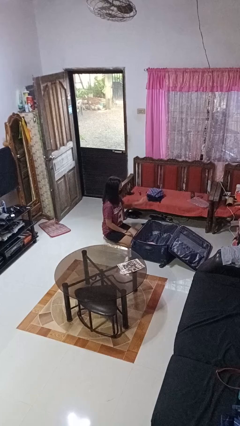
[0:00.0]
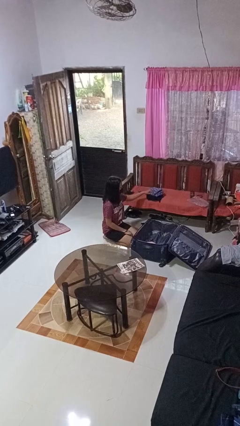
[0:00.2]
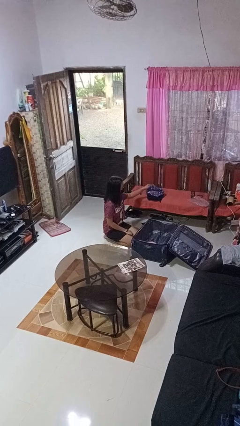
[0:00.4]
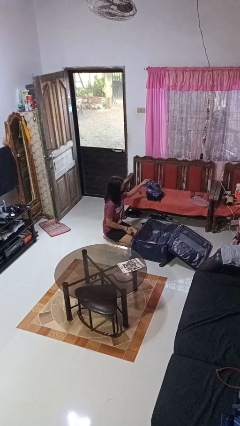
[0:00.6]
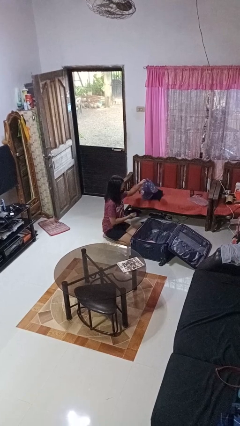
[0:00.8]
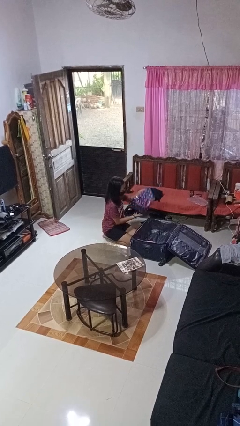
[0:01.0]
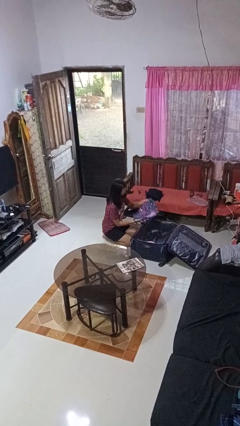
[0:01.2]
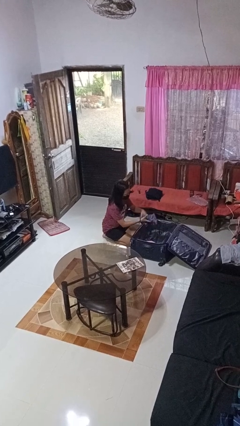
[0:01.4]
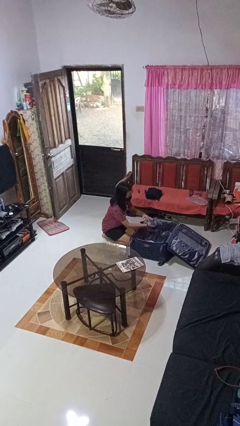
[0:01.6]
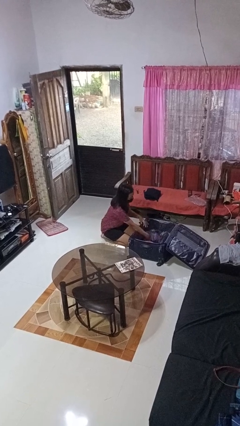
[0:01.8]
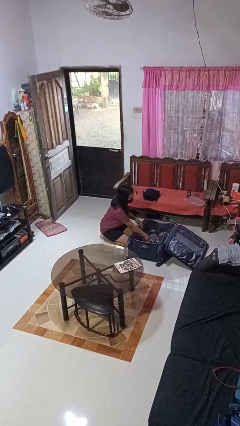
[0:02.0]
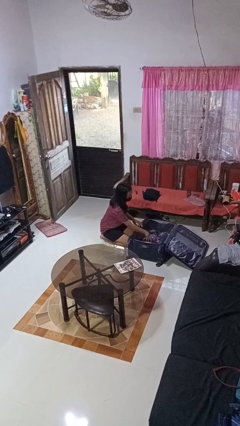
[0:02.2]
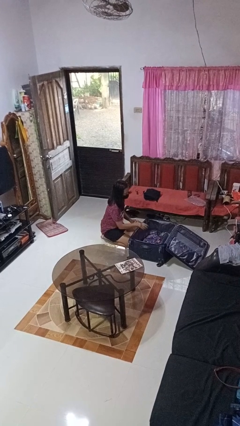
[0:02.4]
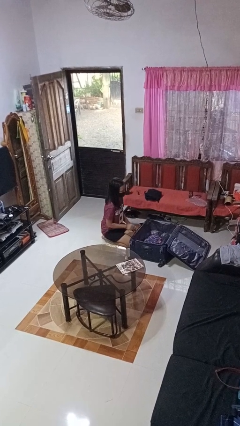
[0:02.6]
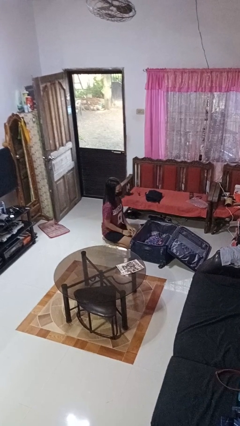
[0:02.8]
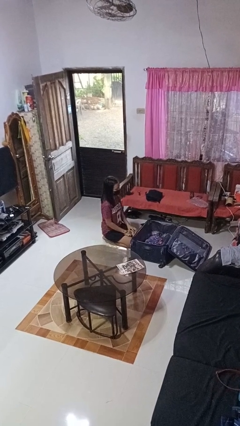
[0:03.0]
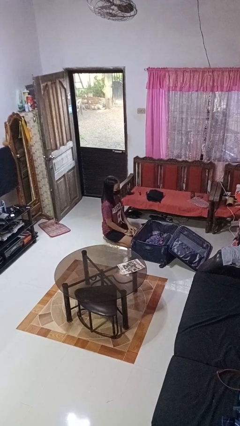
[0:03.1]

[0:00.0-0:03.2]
person loads clothes into suitcase

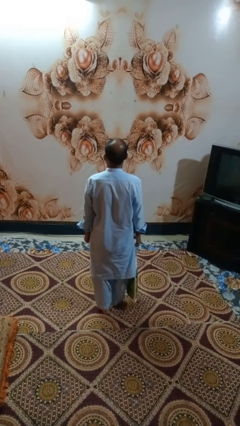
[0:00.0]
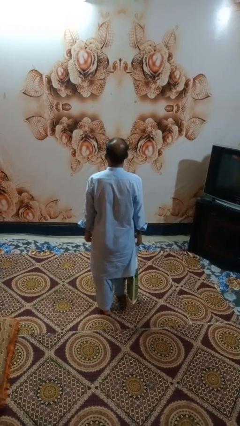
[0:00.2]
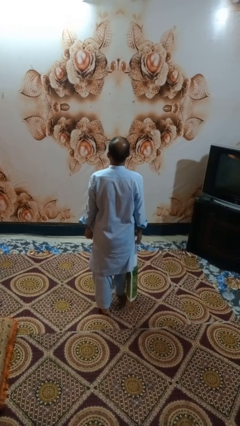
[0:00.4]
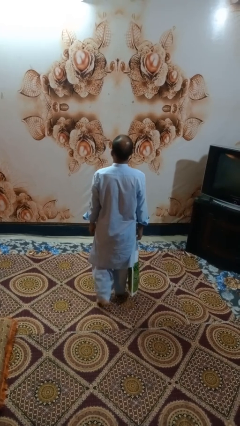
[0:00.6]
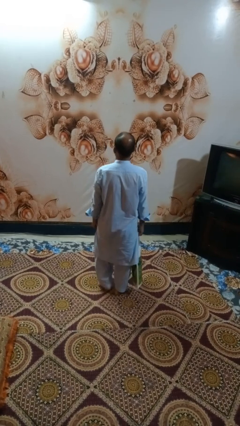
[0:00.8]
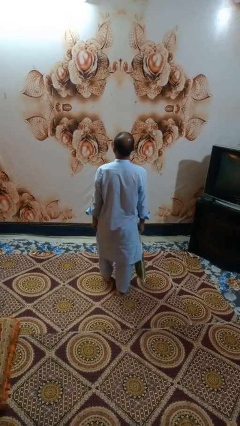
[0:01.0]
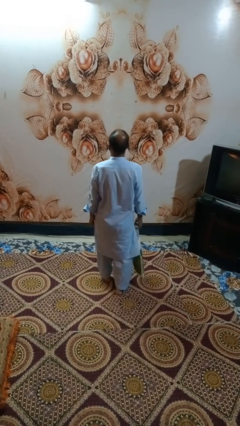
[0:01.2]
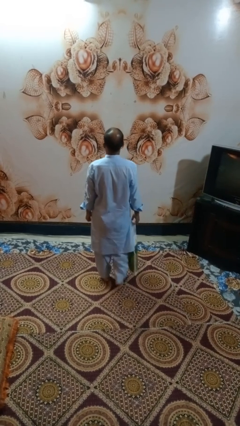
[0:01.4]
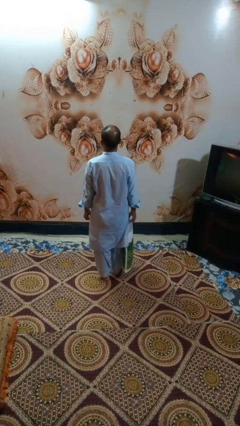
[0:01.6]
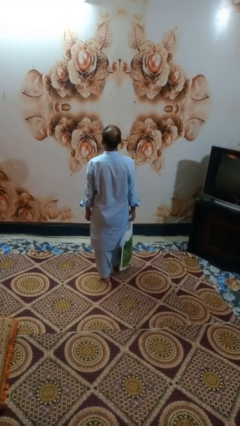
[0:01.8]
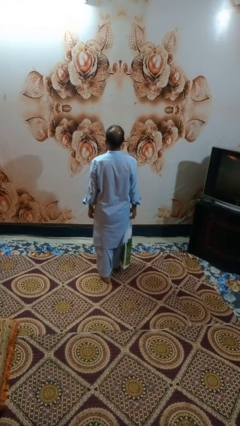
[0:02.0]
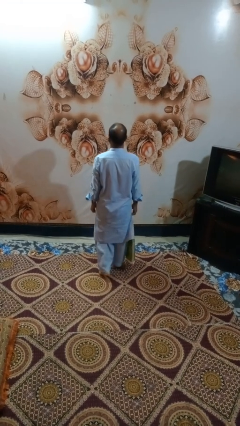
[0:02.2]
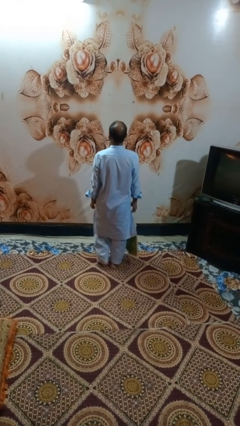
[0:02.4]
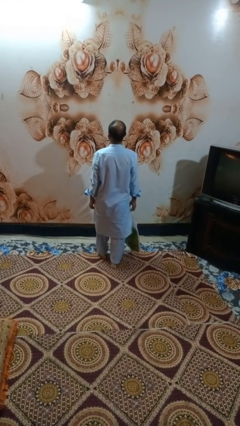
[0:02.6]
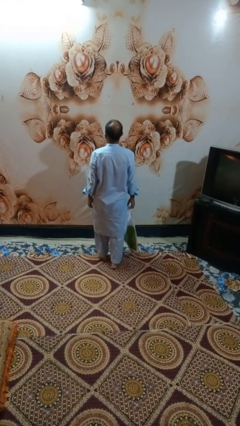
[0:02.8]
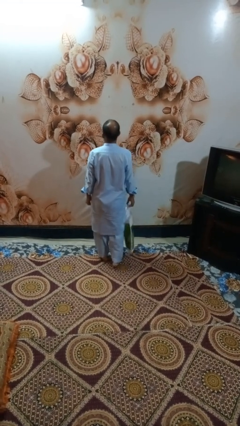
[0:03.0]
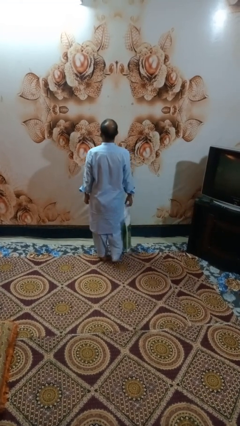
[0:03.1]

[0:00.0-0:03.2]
person carries groceries

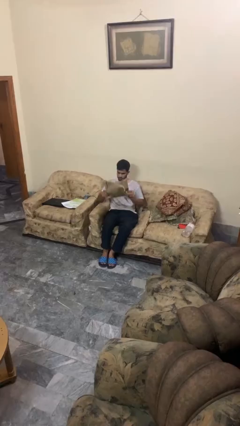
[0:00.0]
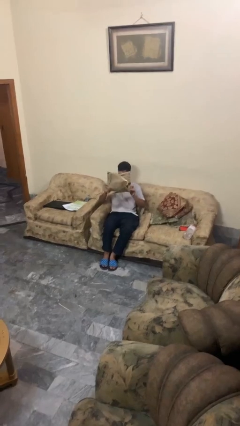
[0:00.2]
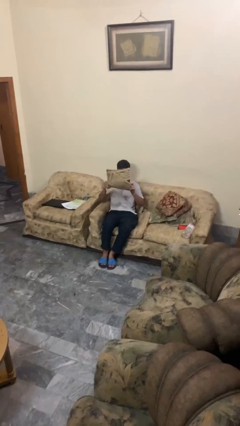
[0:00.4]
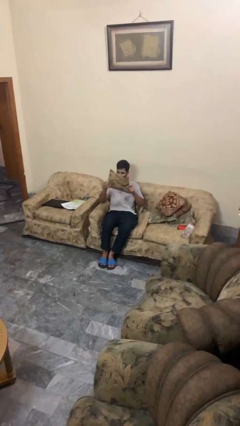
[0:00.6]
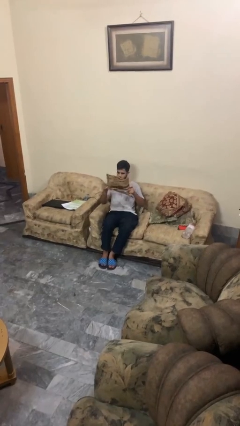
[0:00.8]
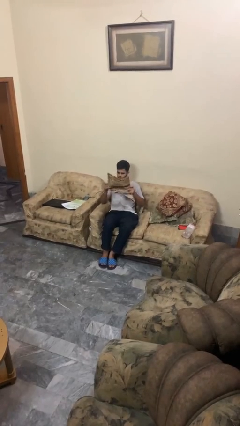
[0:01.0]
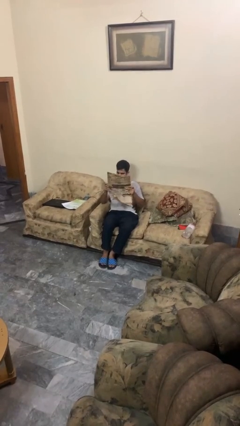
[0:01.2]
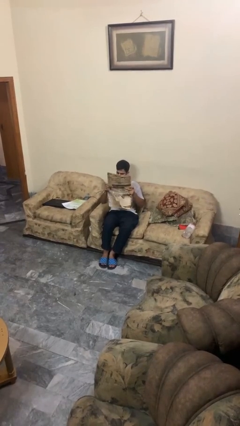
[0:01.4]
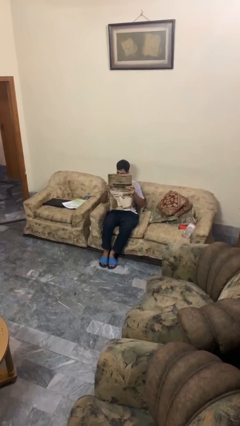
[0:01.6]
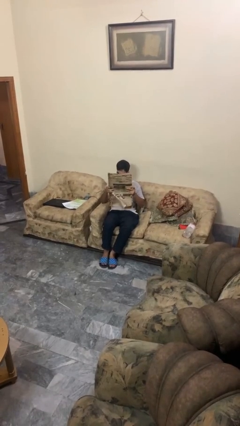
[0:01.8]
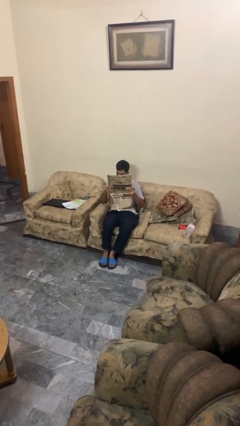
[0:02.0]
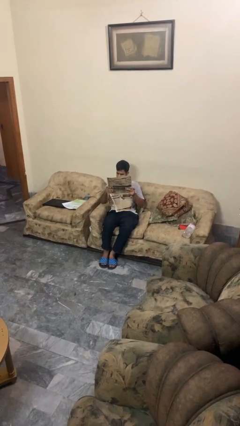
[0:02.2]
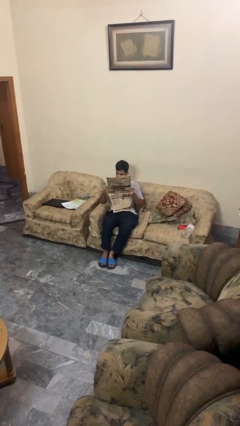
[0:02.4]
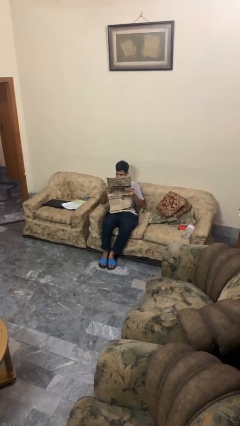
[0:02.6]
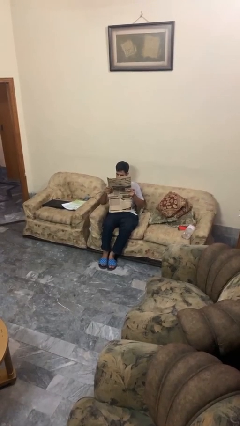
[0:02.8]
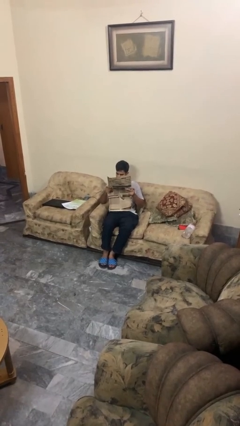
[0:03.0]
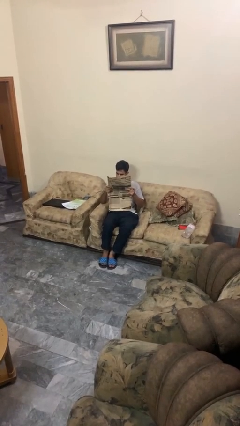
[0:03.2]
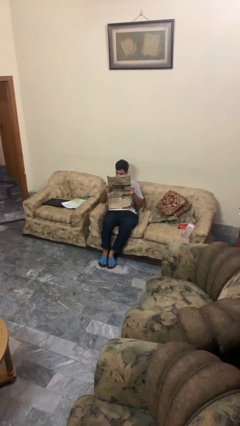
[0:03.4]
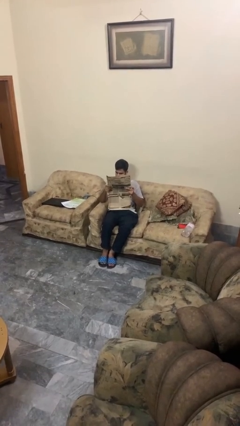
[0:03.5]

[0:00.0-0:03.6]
person reads newspaper

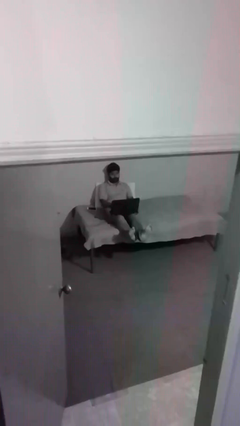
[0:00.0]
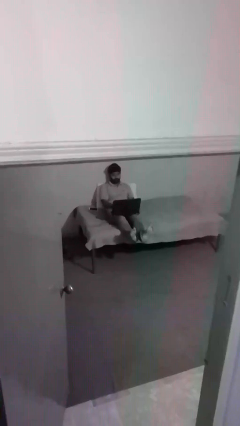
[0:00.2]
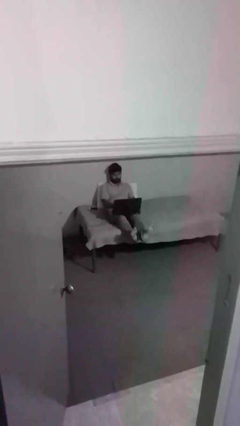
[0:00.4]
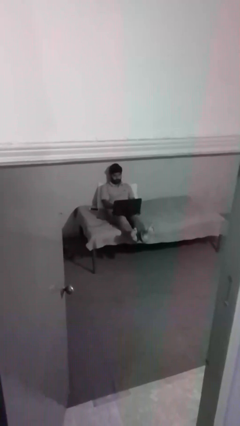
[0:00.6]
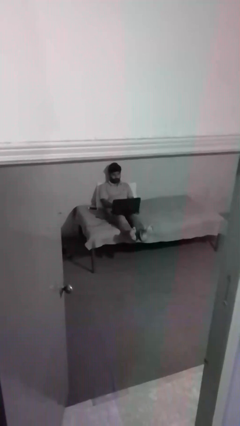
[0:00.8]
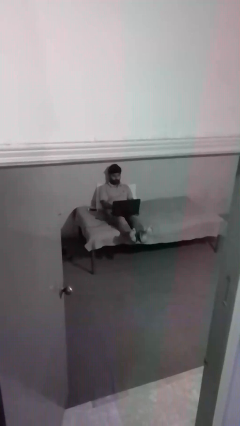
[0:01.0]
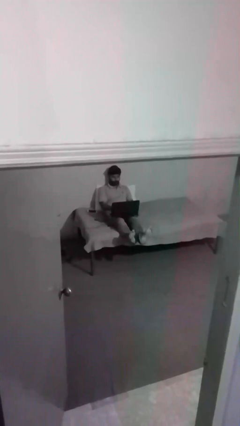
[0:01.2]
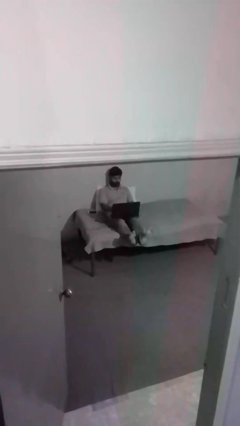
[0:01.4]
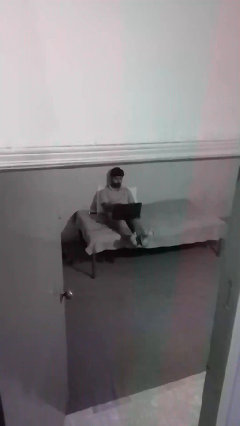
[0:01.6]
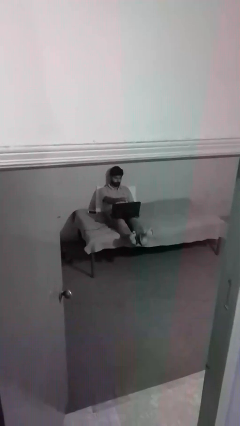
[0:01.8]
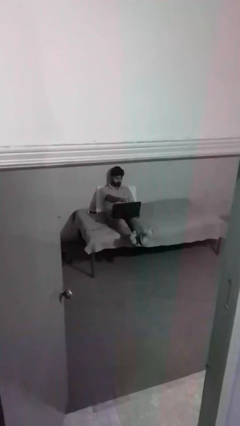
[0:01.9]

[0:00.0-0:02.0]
person interacts with laptop

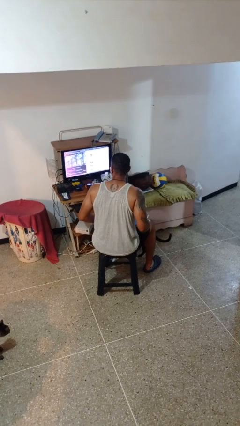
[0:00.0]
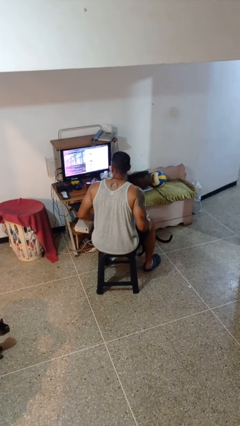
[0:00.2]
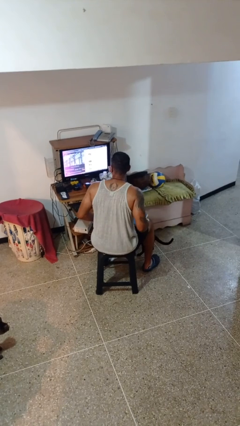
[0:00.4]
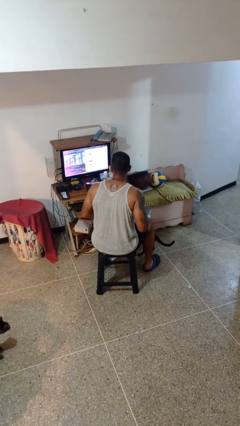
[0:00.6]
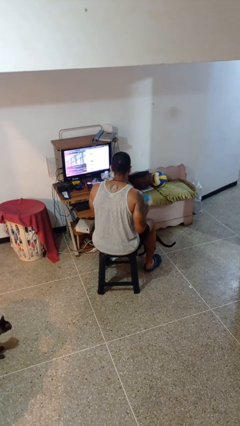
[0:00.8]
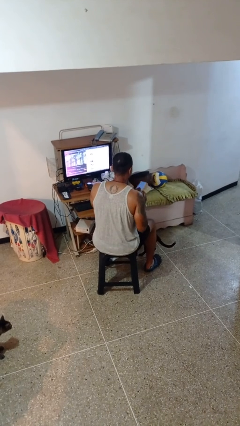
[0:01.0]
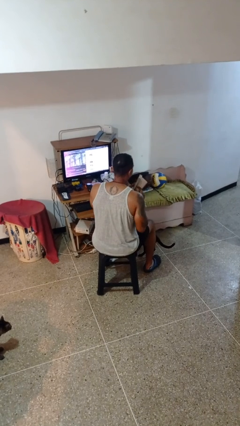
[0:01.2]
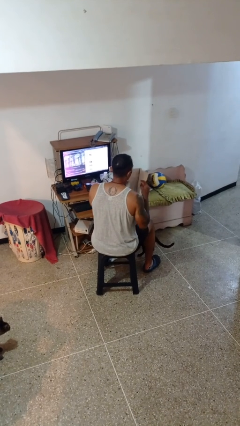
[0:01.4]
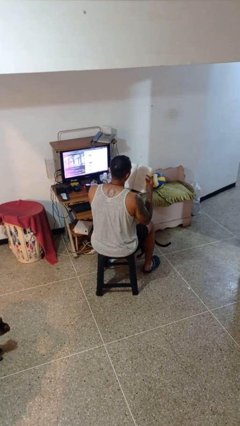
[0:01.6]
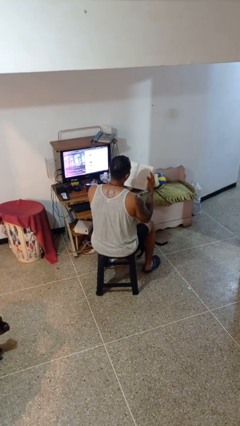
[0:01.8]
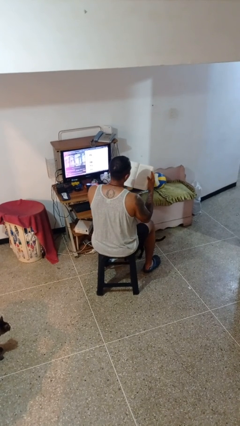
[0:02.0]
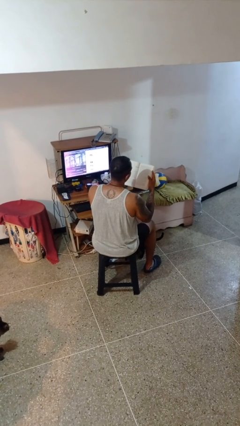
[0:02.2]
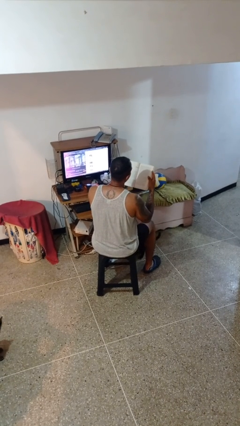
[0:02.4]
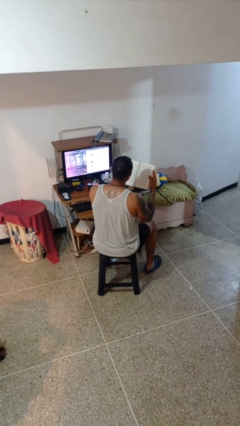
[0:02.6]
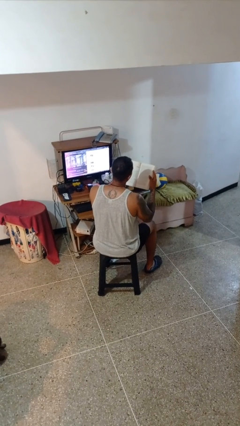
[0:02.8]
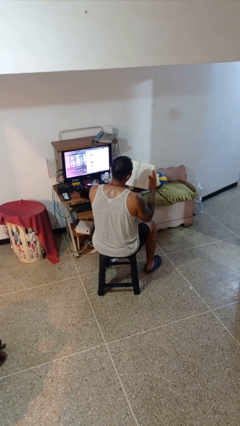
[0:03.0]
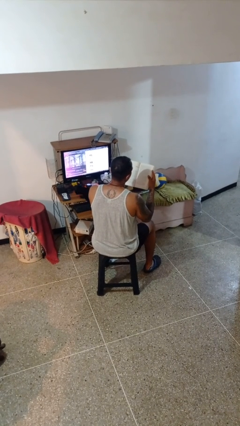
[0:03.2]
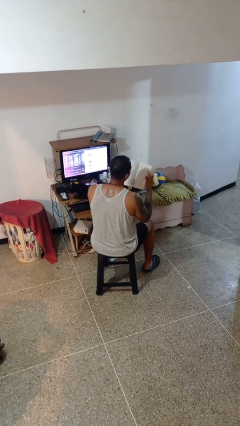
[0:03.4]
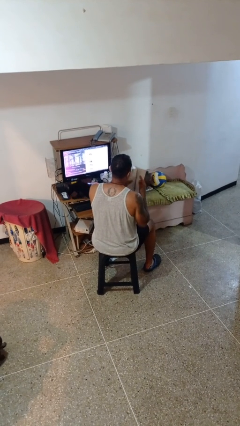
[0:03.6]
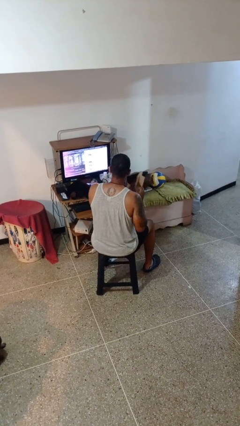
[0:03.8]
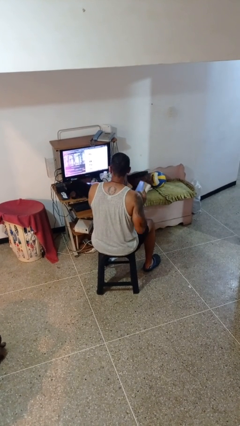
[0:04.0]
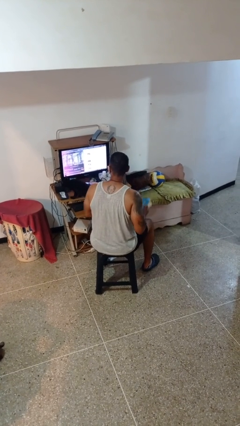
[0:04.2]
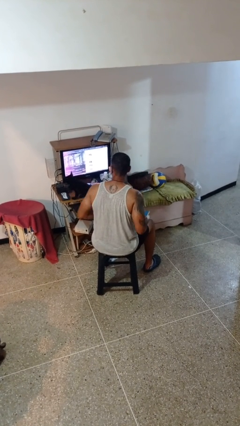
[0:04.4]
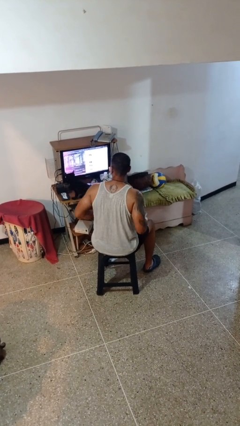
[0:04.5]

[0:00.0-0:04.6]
person reads book

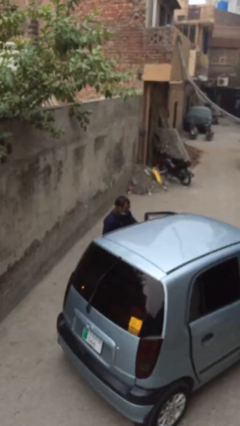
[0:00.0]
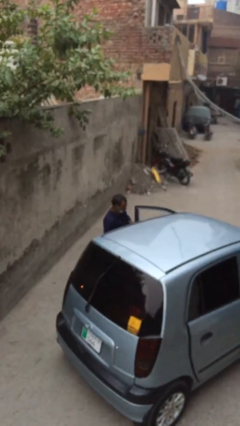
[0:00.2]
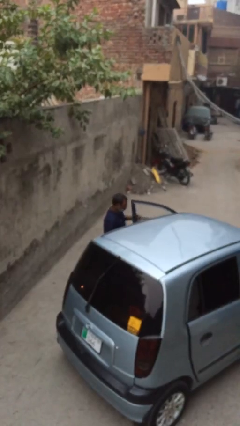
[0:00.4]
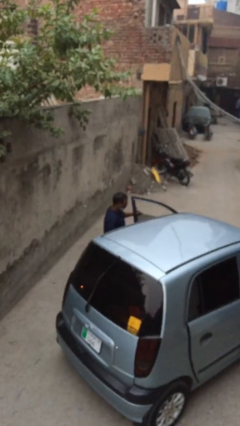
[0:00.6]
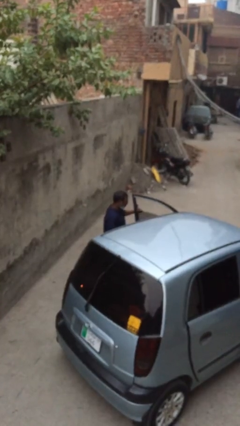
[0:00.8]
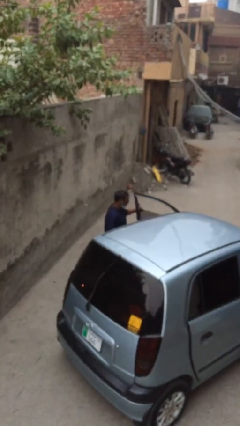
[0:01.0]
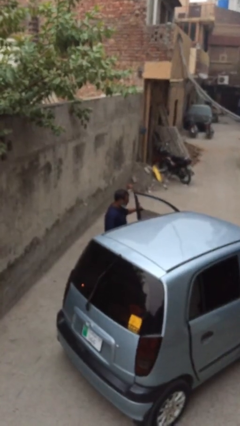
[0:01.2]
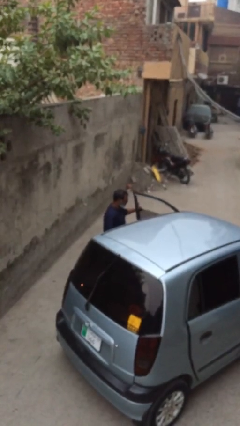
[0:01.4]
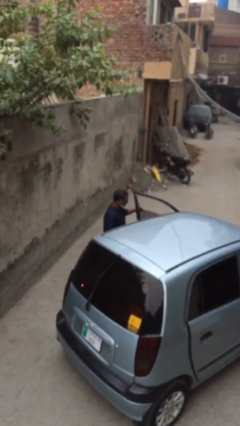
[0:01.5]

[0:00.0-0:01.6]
person opens car door
